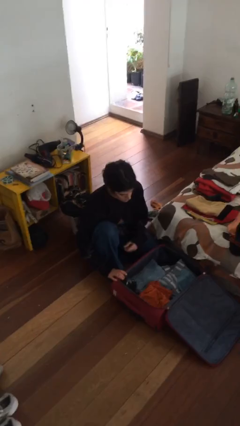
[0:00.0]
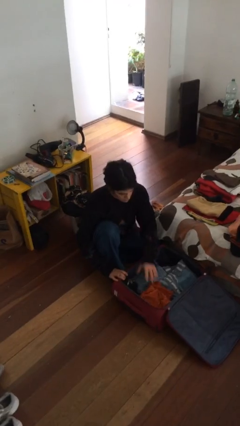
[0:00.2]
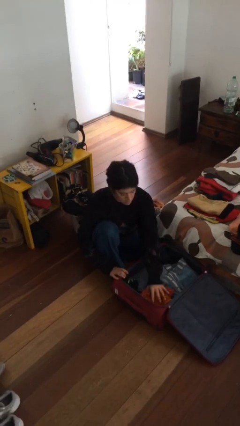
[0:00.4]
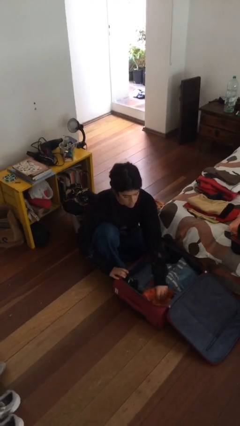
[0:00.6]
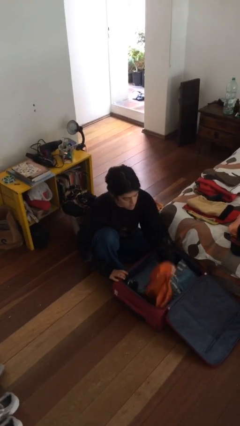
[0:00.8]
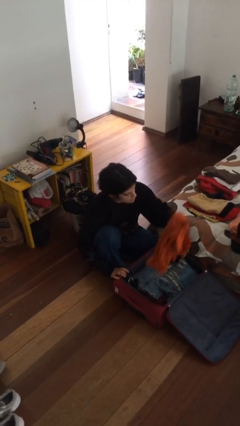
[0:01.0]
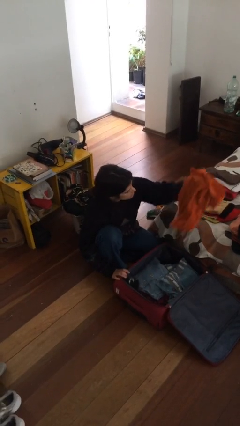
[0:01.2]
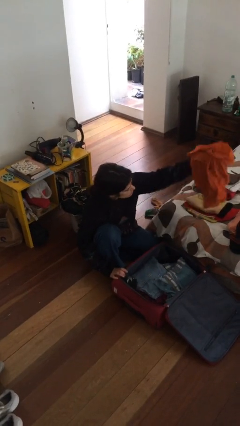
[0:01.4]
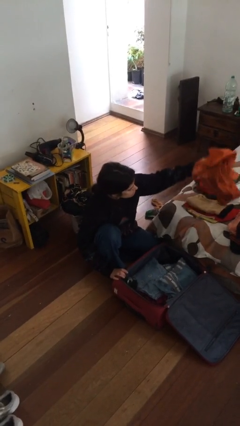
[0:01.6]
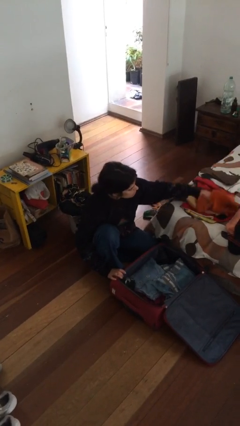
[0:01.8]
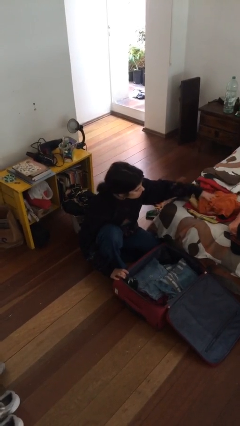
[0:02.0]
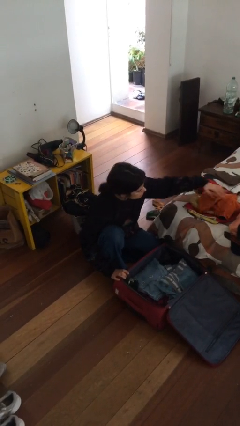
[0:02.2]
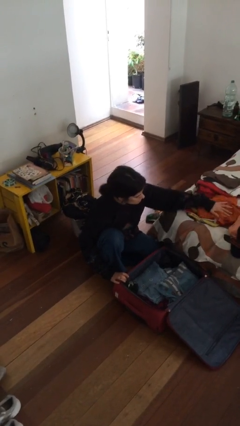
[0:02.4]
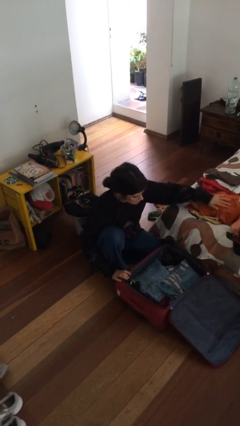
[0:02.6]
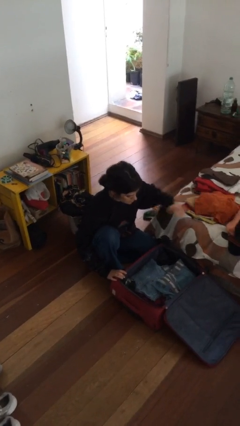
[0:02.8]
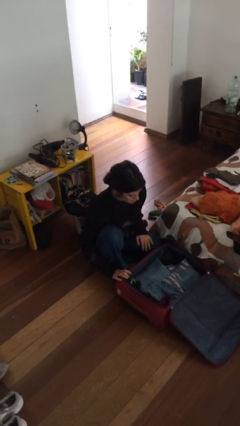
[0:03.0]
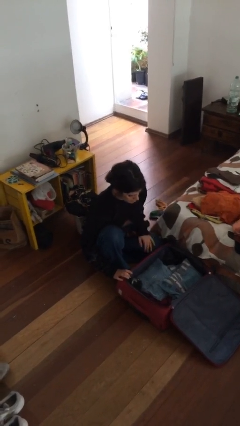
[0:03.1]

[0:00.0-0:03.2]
person unloads clothes from suitcase

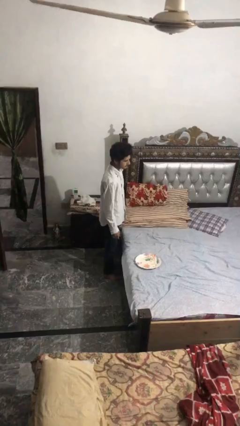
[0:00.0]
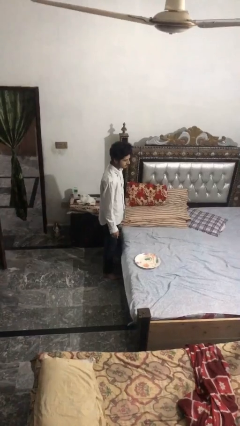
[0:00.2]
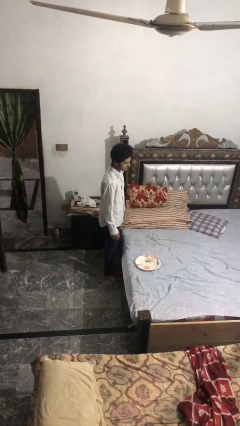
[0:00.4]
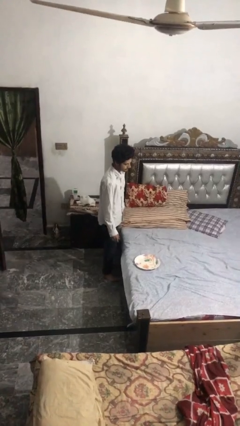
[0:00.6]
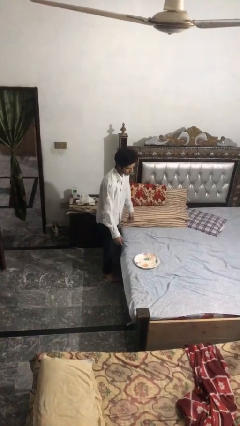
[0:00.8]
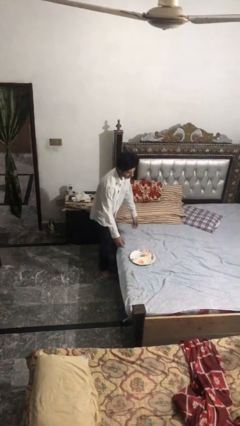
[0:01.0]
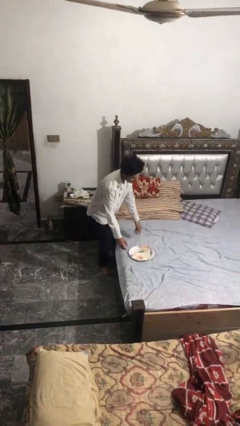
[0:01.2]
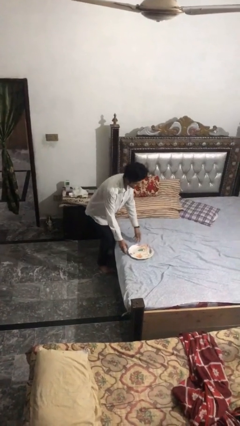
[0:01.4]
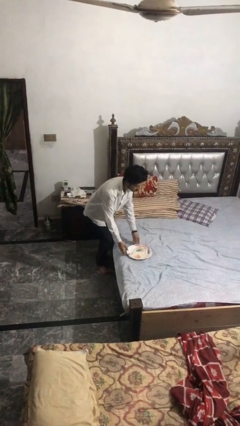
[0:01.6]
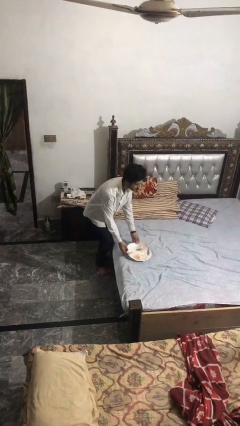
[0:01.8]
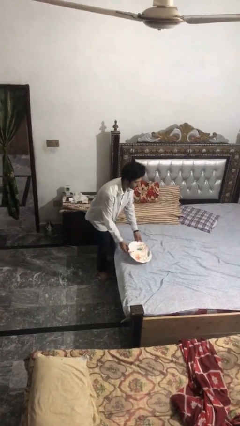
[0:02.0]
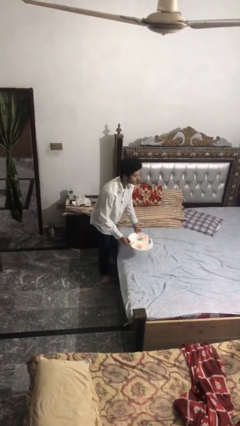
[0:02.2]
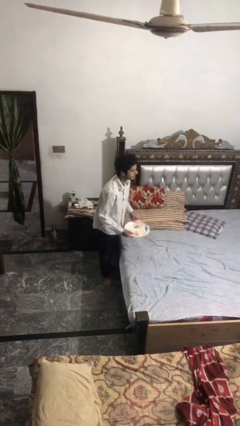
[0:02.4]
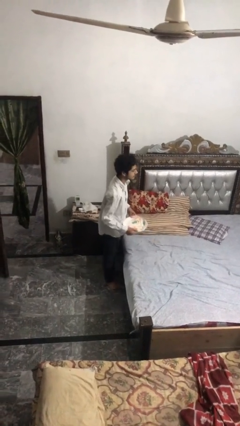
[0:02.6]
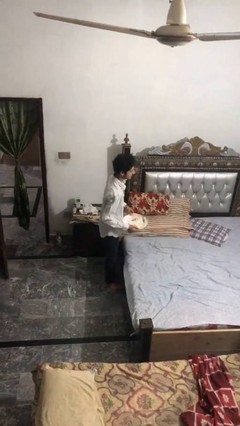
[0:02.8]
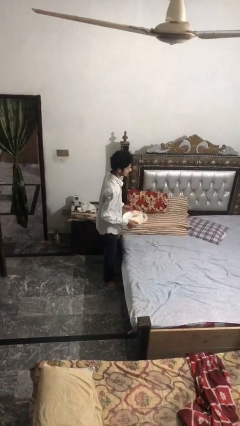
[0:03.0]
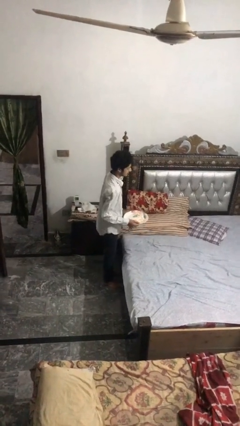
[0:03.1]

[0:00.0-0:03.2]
person picks up object from bed

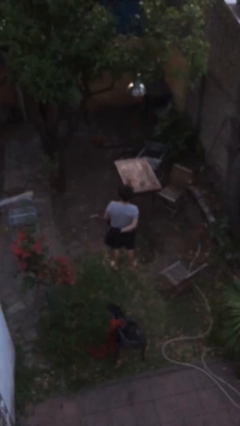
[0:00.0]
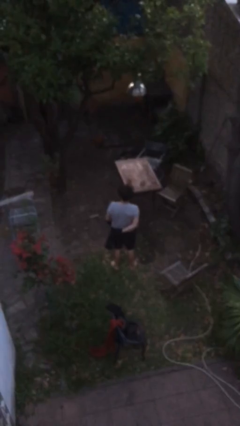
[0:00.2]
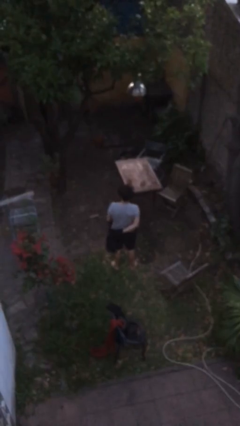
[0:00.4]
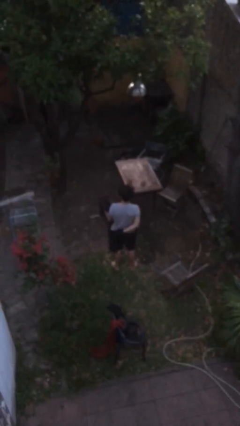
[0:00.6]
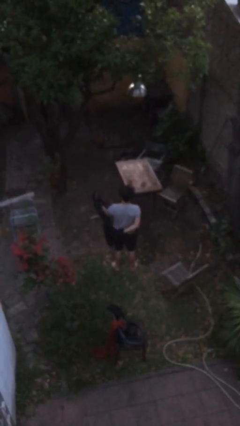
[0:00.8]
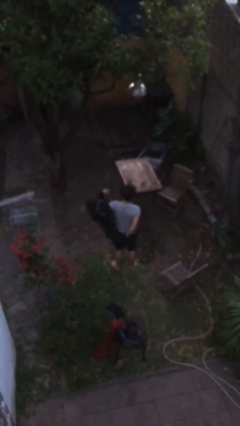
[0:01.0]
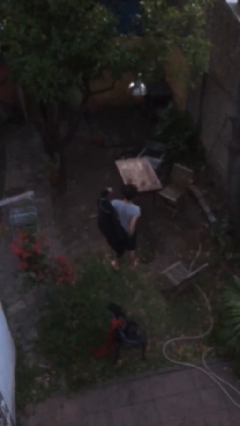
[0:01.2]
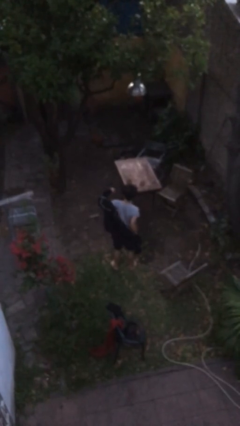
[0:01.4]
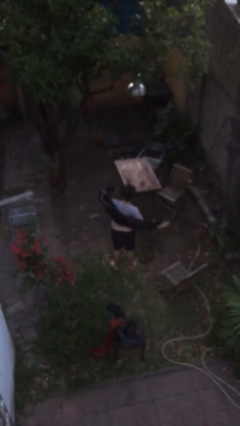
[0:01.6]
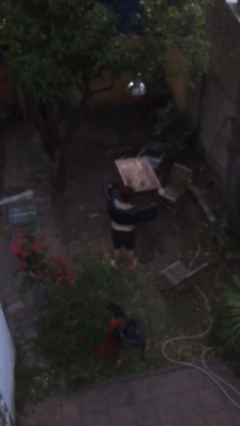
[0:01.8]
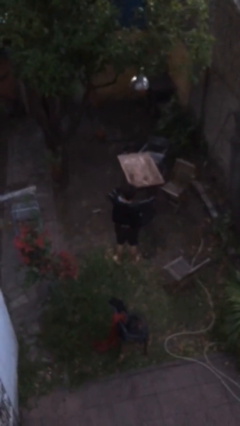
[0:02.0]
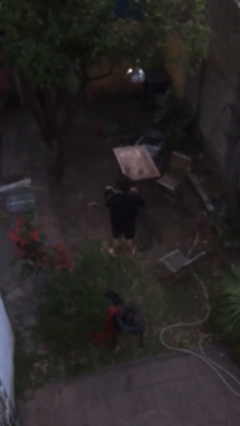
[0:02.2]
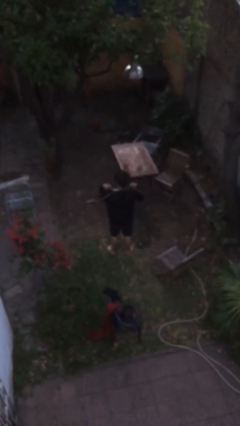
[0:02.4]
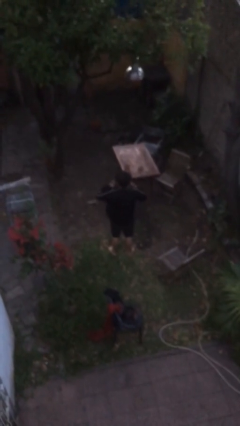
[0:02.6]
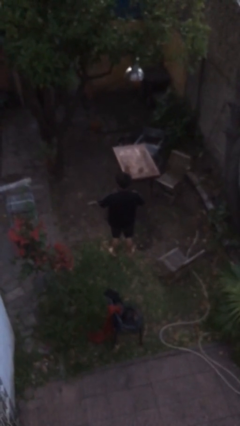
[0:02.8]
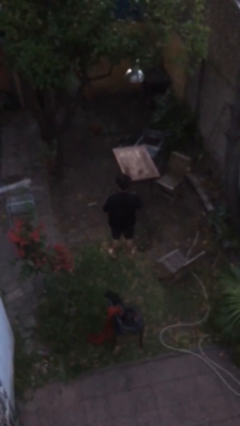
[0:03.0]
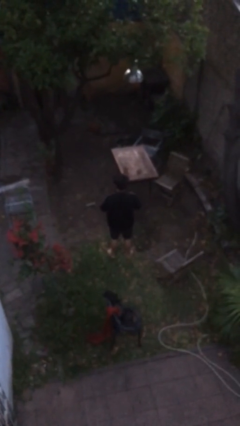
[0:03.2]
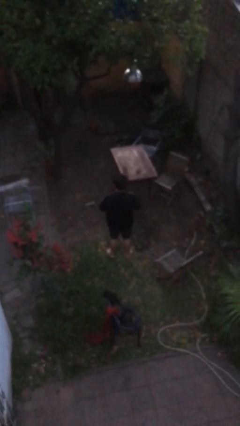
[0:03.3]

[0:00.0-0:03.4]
person puts on jacket

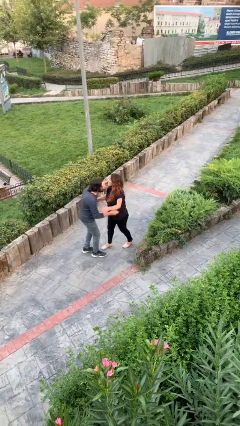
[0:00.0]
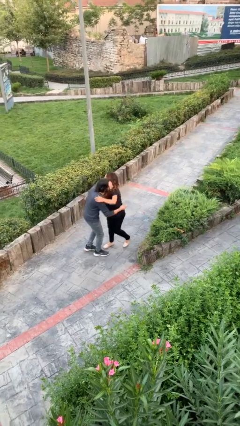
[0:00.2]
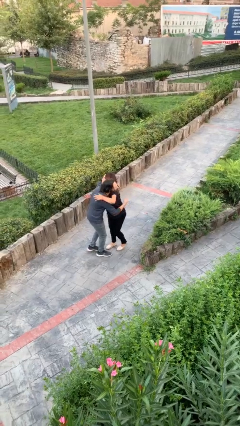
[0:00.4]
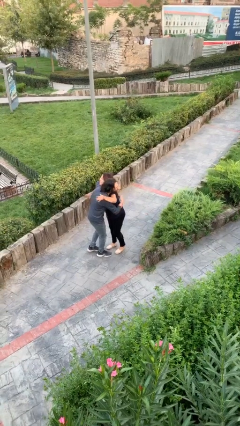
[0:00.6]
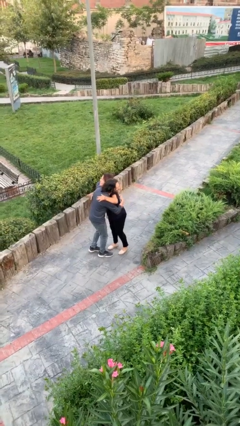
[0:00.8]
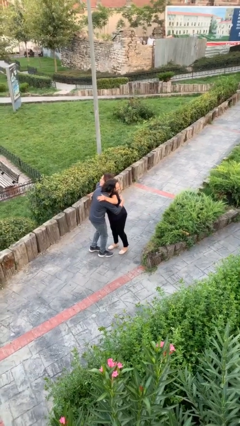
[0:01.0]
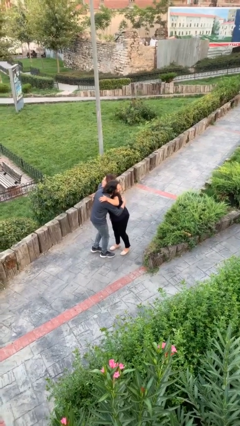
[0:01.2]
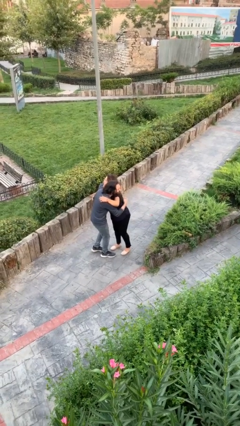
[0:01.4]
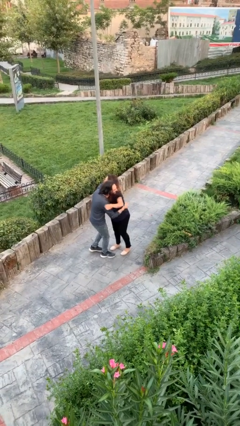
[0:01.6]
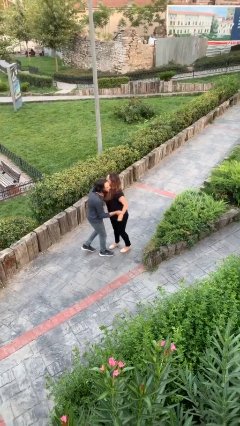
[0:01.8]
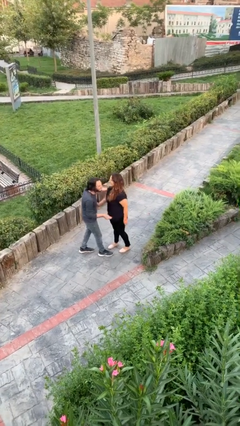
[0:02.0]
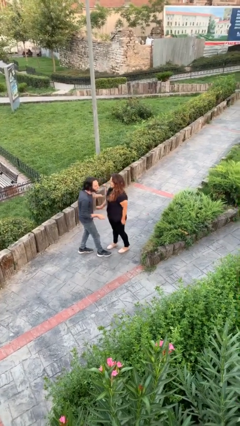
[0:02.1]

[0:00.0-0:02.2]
person embraces person

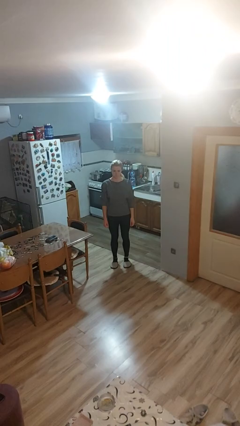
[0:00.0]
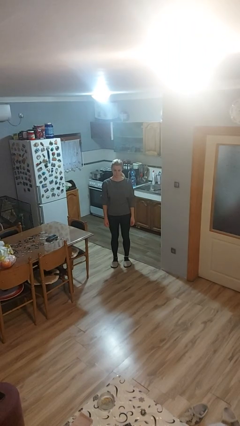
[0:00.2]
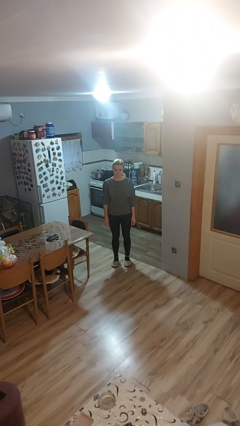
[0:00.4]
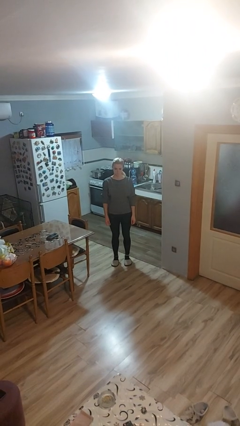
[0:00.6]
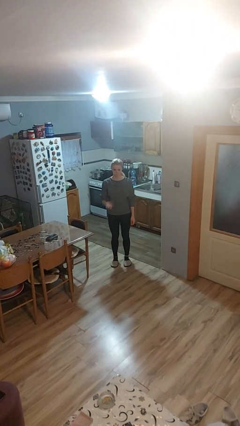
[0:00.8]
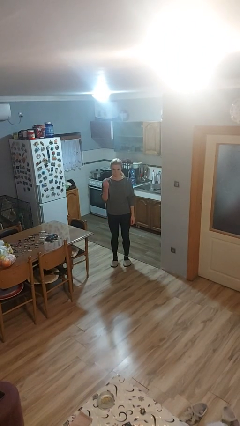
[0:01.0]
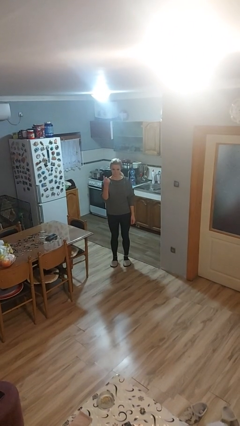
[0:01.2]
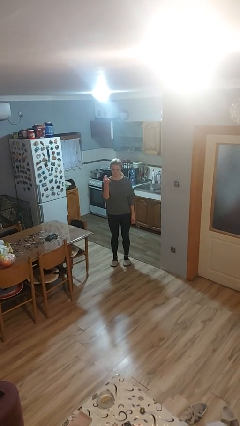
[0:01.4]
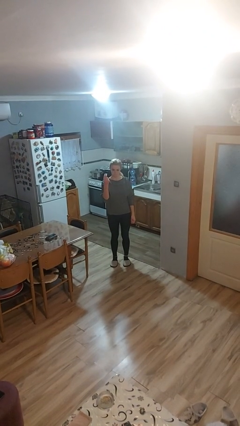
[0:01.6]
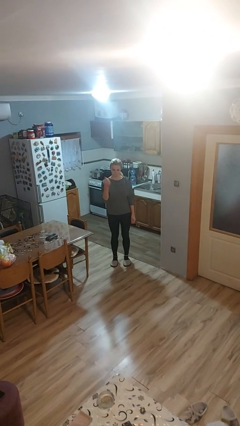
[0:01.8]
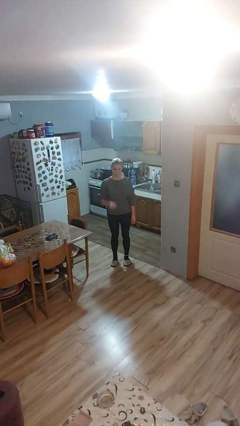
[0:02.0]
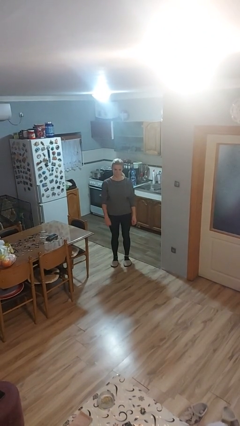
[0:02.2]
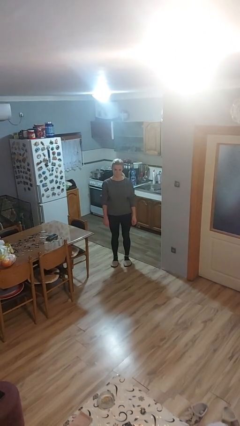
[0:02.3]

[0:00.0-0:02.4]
person snaps fingers

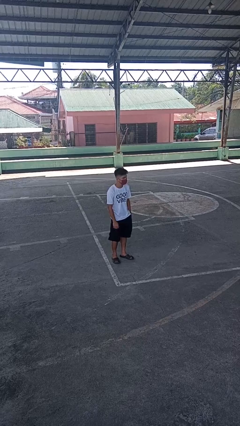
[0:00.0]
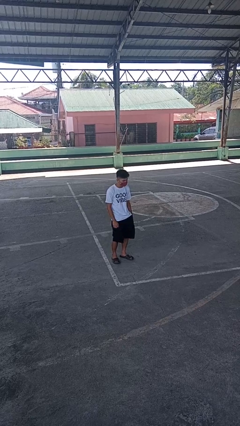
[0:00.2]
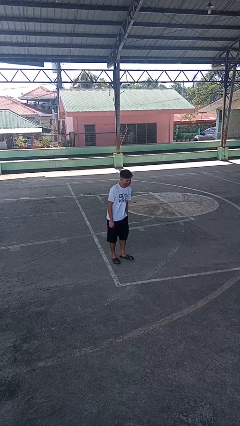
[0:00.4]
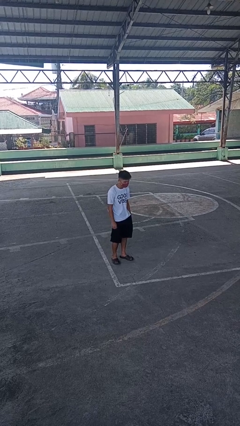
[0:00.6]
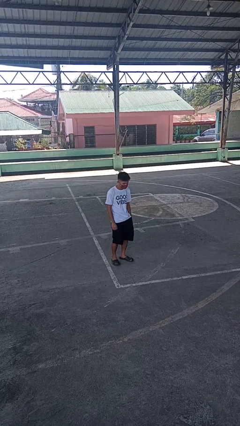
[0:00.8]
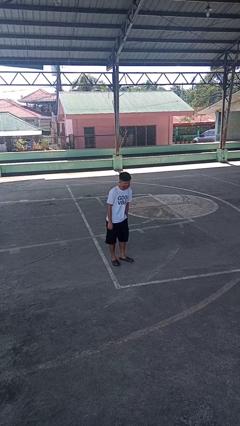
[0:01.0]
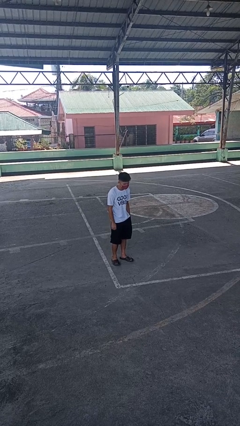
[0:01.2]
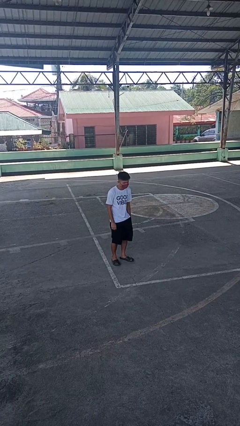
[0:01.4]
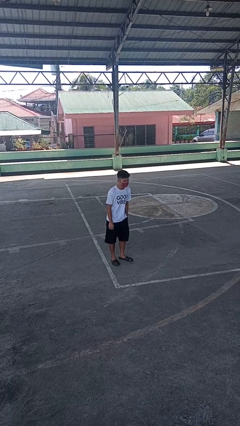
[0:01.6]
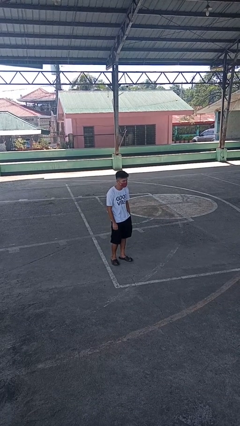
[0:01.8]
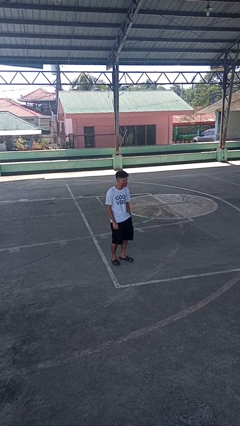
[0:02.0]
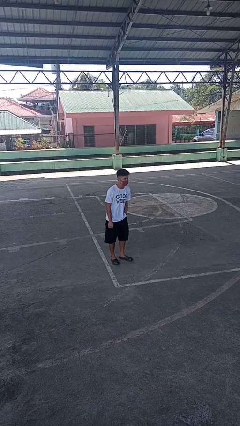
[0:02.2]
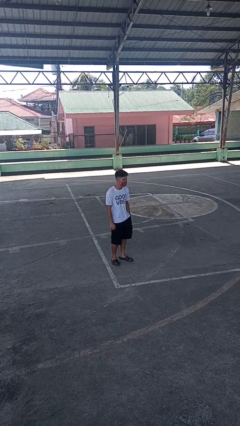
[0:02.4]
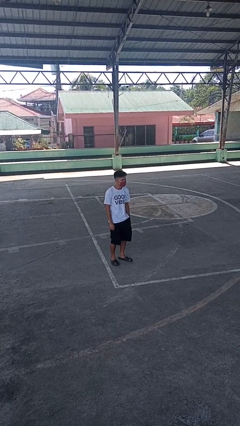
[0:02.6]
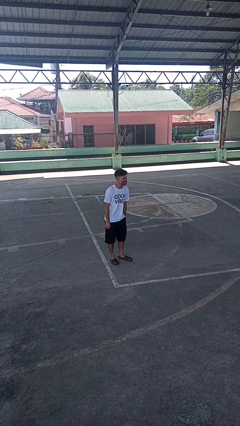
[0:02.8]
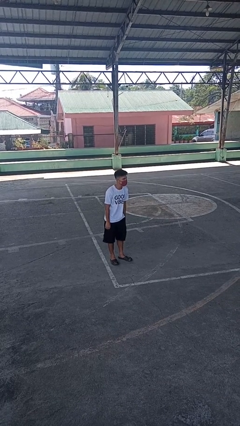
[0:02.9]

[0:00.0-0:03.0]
person wiggles hips
